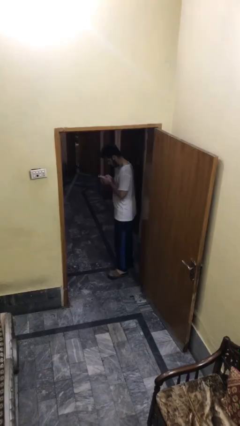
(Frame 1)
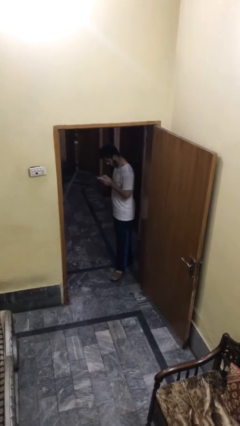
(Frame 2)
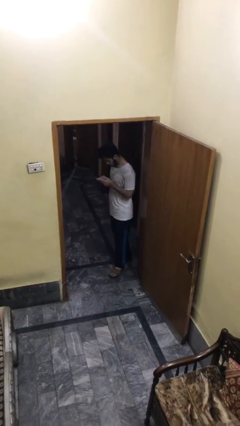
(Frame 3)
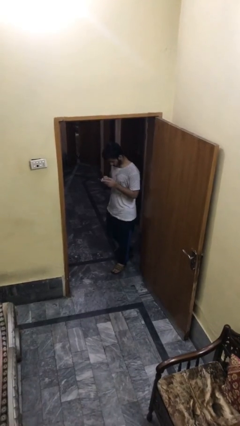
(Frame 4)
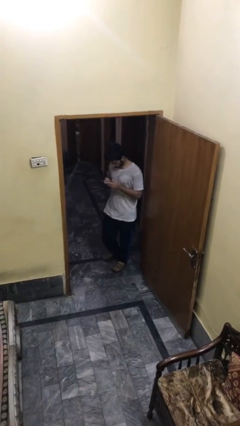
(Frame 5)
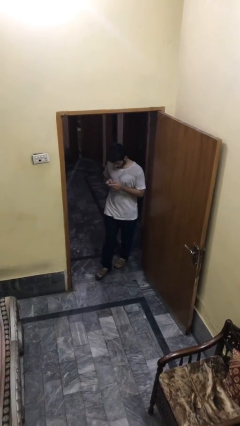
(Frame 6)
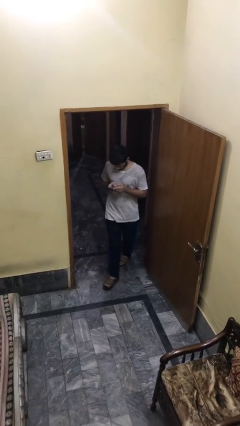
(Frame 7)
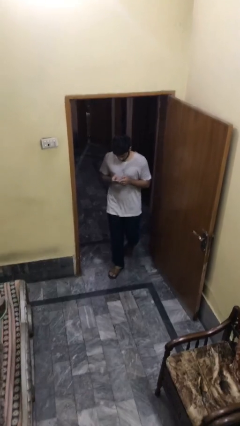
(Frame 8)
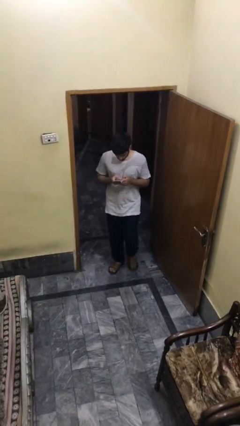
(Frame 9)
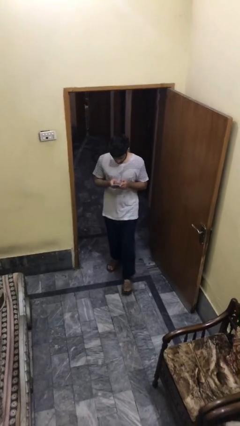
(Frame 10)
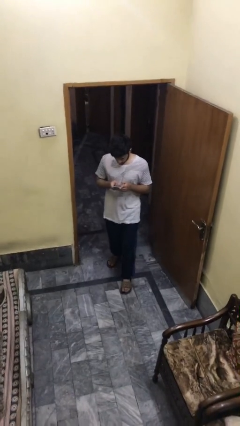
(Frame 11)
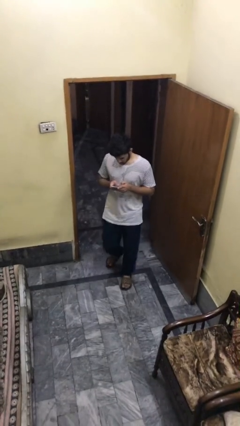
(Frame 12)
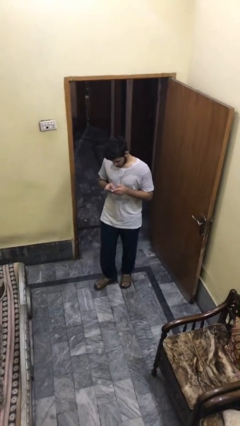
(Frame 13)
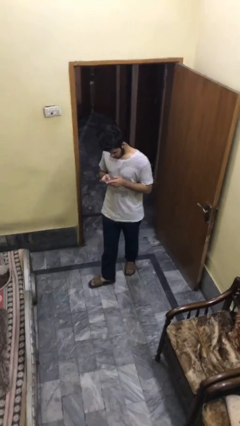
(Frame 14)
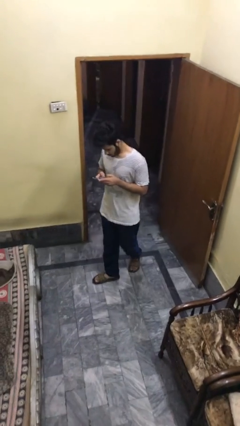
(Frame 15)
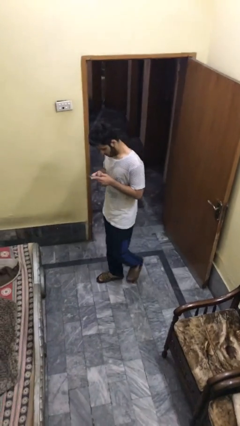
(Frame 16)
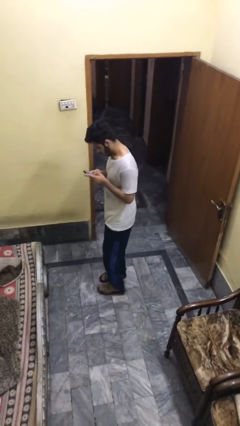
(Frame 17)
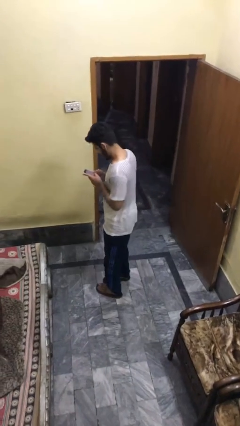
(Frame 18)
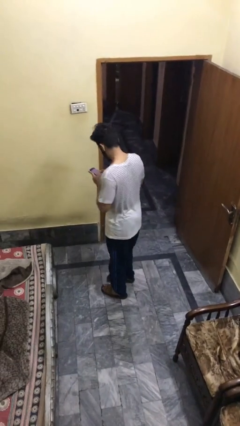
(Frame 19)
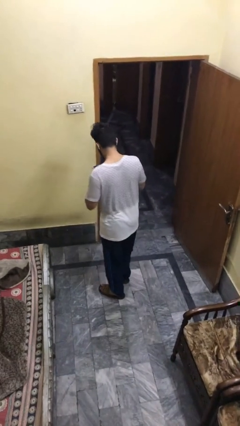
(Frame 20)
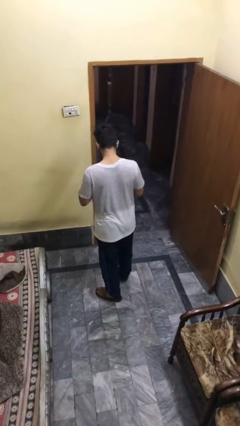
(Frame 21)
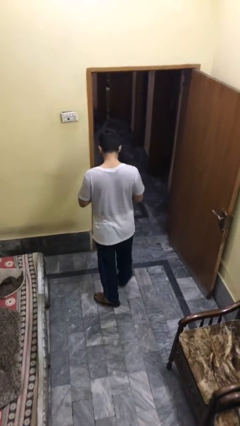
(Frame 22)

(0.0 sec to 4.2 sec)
person enters scene through structure

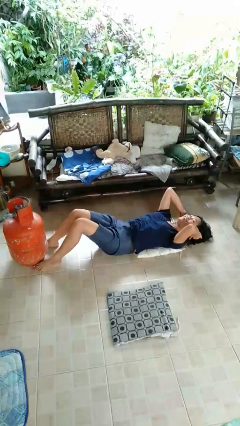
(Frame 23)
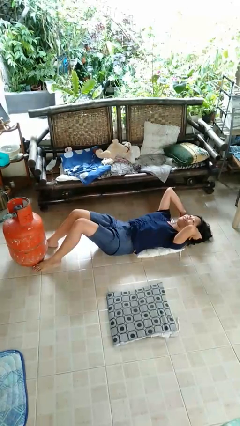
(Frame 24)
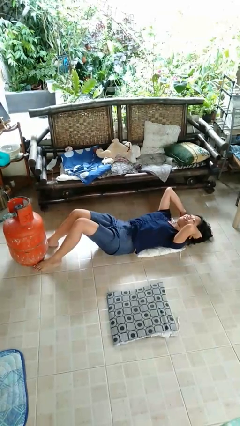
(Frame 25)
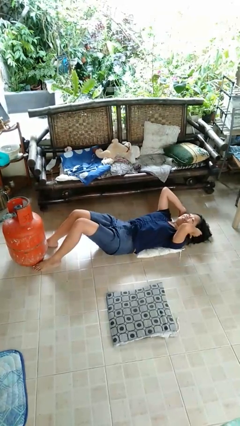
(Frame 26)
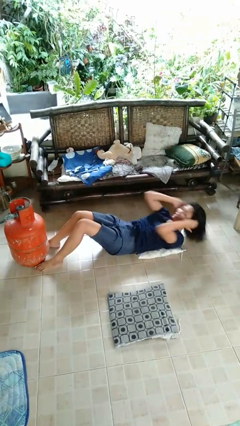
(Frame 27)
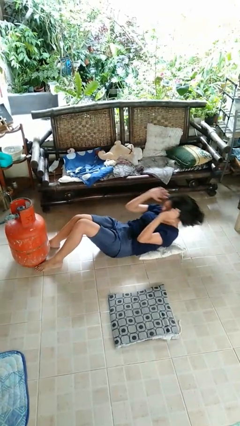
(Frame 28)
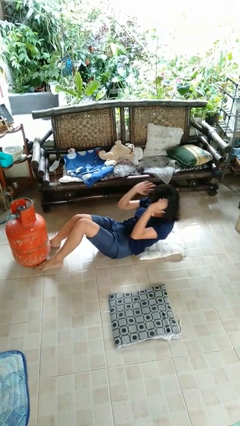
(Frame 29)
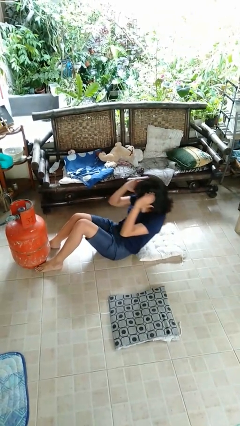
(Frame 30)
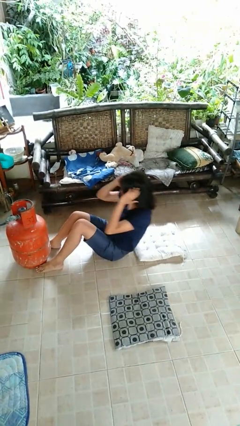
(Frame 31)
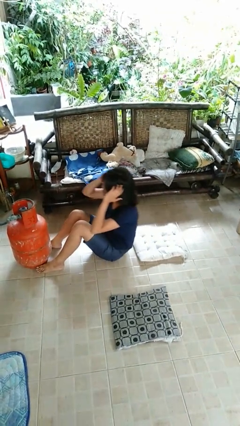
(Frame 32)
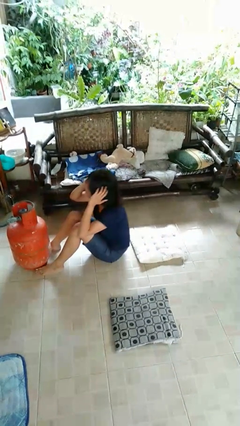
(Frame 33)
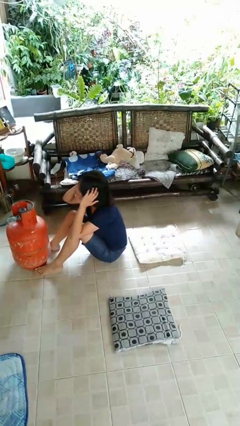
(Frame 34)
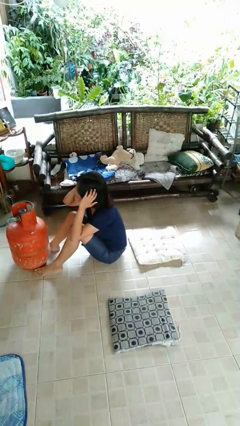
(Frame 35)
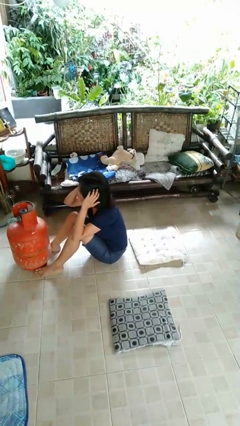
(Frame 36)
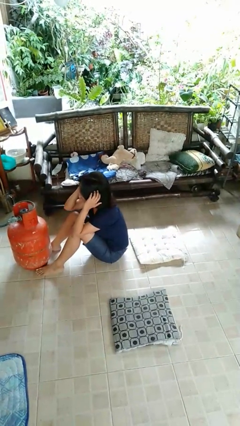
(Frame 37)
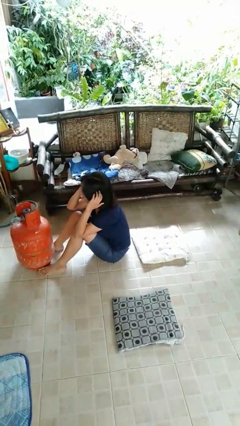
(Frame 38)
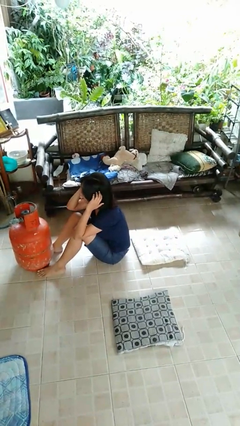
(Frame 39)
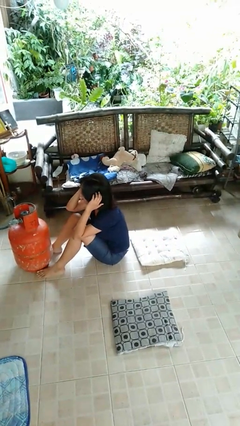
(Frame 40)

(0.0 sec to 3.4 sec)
person exercises with situp

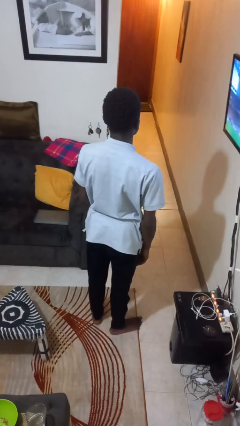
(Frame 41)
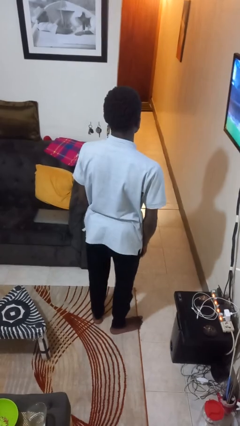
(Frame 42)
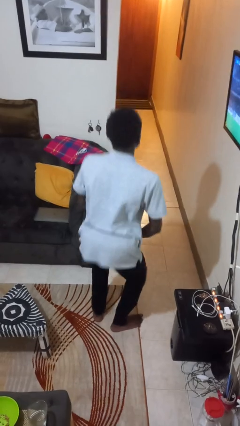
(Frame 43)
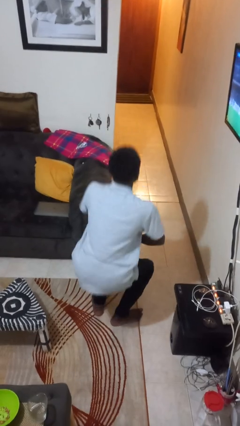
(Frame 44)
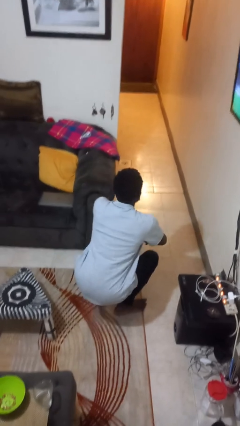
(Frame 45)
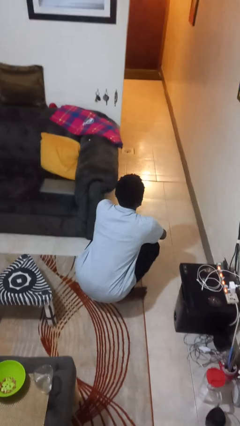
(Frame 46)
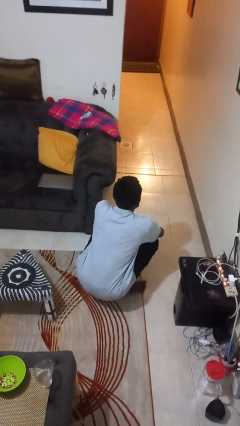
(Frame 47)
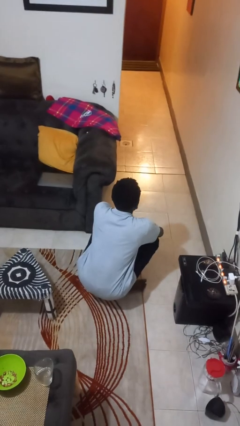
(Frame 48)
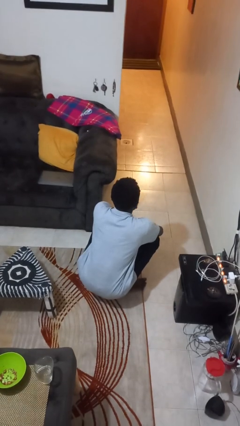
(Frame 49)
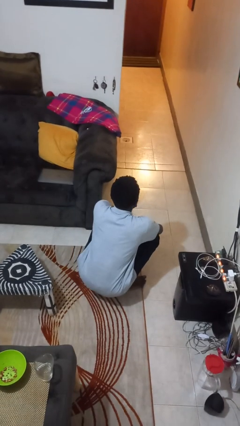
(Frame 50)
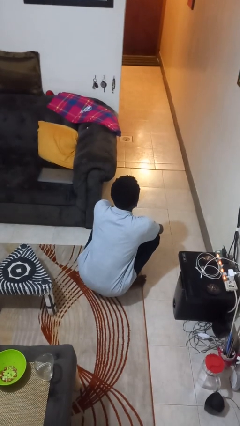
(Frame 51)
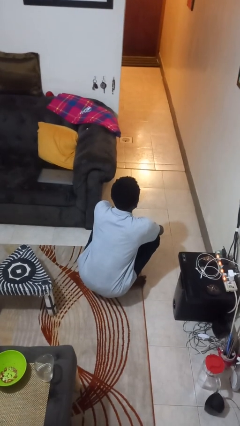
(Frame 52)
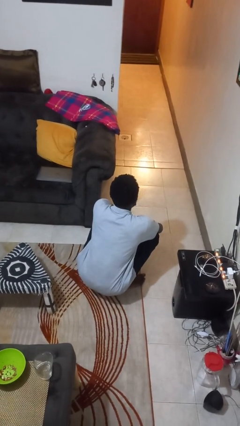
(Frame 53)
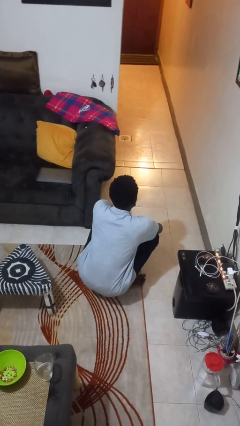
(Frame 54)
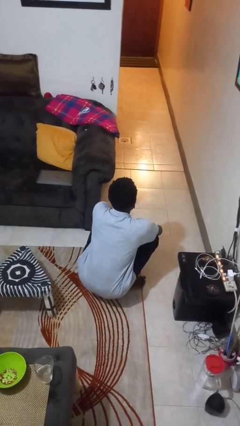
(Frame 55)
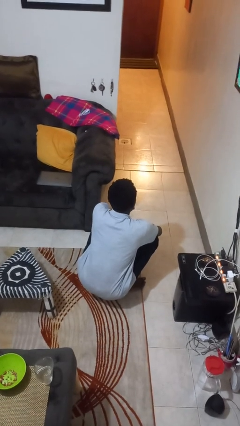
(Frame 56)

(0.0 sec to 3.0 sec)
person squats

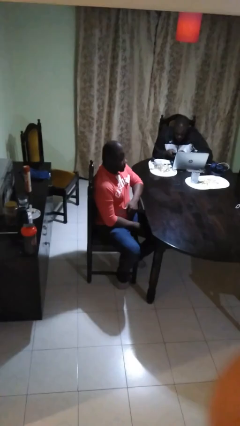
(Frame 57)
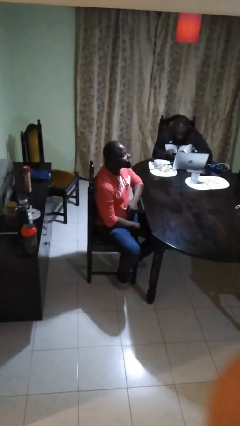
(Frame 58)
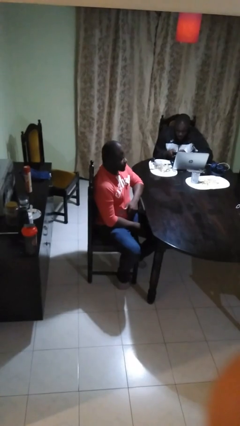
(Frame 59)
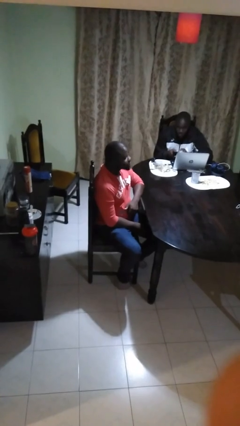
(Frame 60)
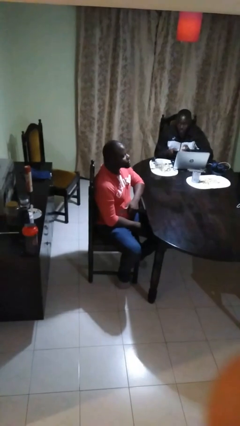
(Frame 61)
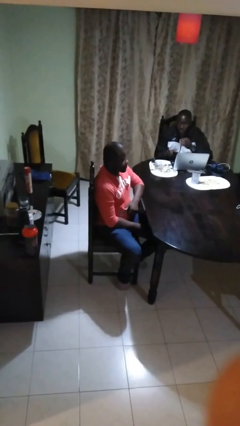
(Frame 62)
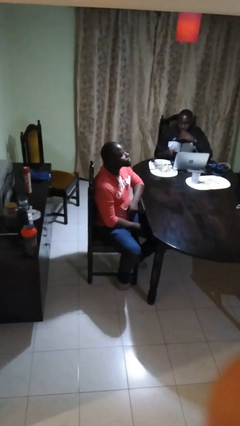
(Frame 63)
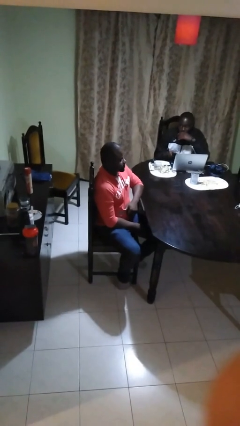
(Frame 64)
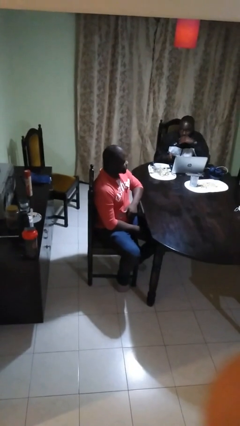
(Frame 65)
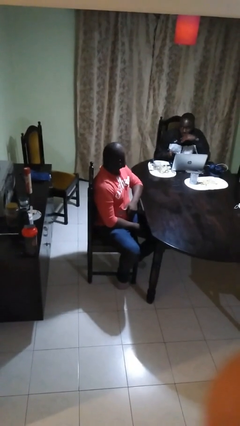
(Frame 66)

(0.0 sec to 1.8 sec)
person nods head

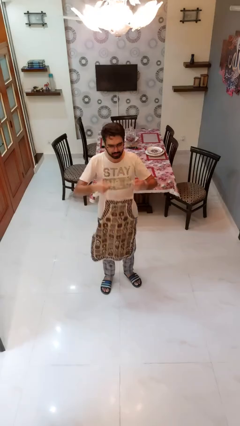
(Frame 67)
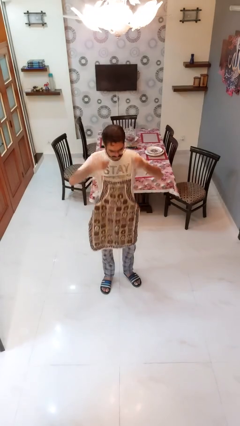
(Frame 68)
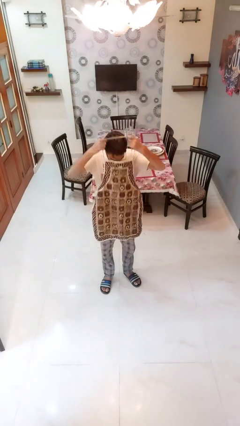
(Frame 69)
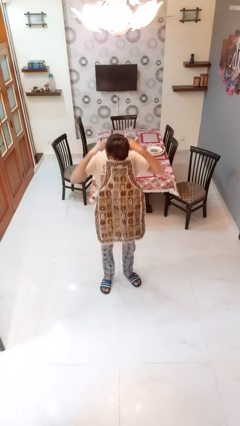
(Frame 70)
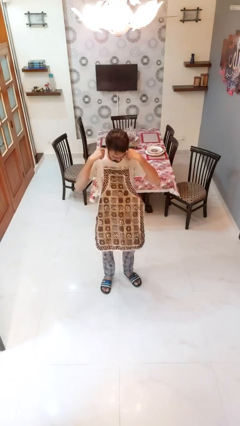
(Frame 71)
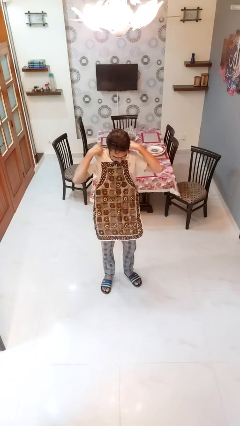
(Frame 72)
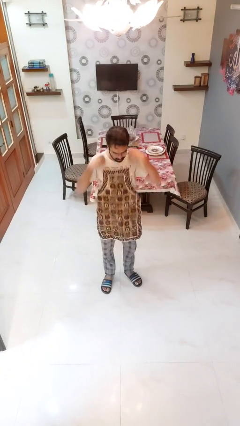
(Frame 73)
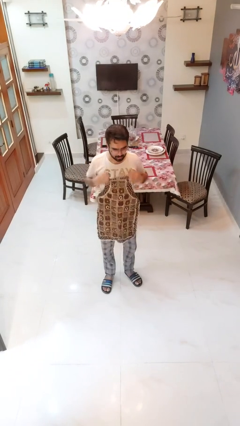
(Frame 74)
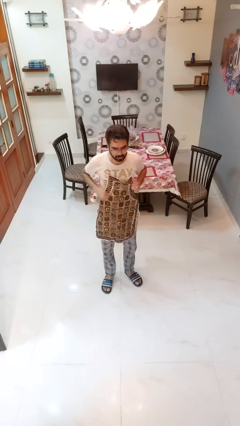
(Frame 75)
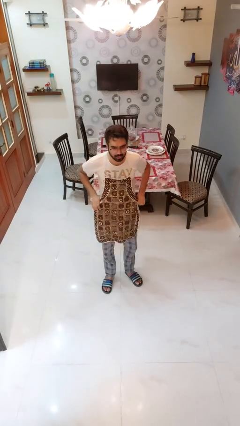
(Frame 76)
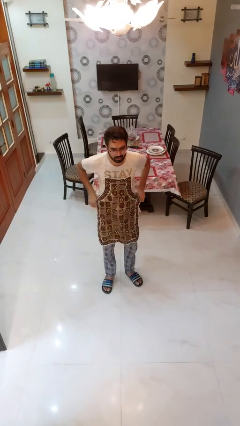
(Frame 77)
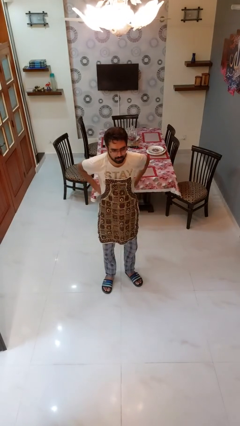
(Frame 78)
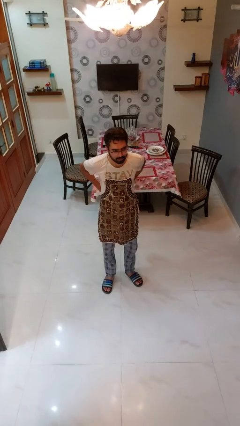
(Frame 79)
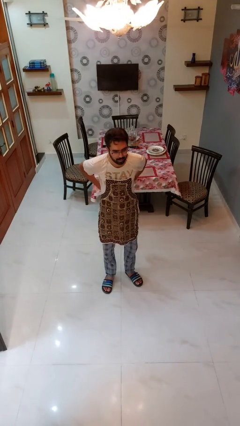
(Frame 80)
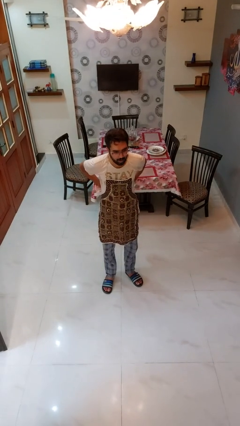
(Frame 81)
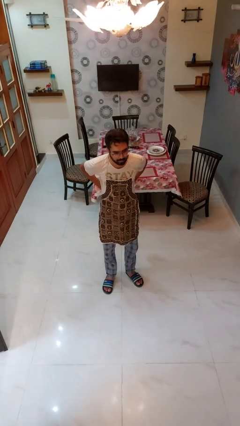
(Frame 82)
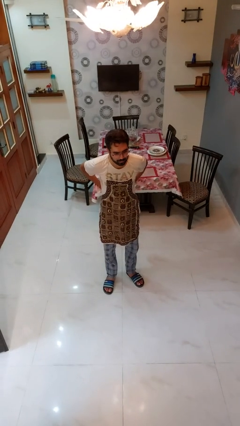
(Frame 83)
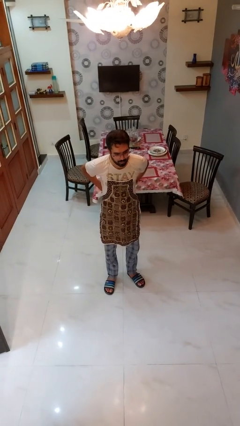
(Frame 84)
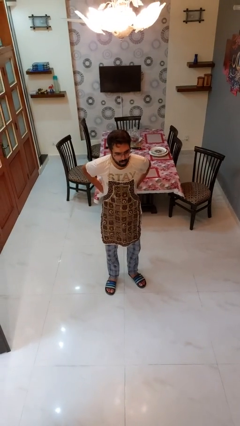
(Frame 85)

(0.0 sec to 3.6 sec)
person puts on apron

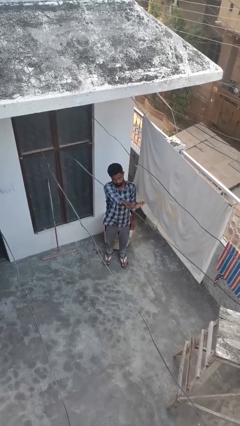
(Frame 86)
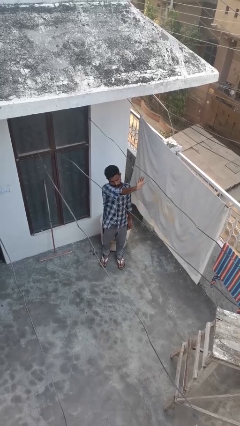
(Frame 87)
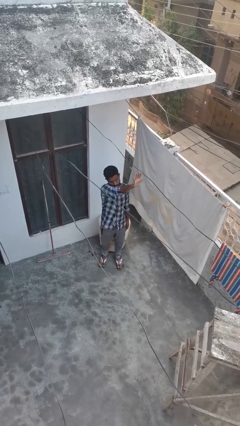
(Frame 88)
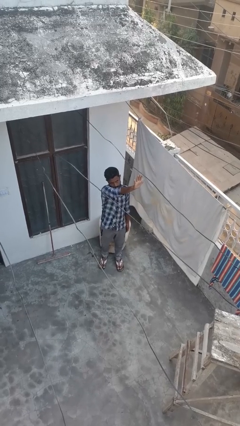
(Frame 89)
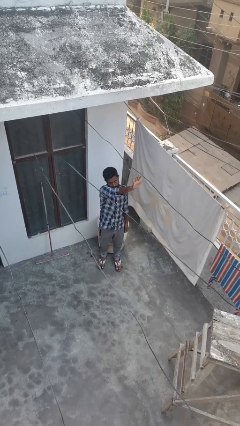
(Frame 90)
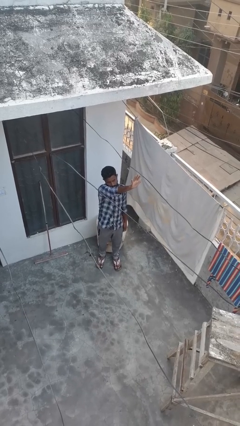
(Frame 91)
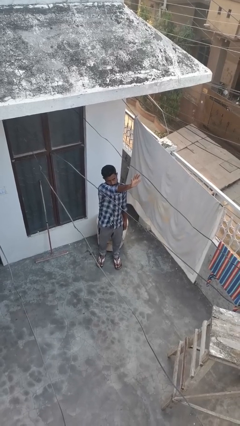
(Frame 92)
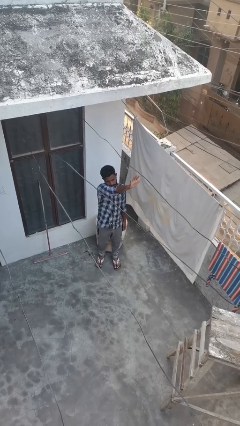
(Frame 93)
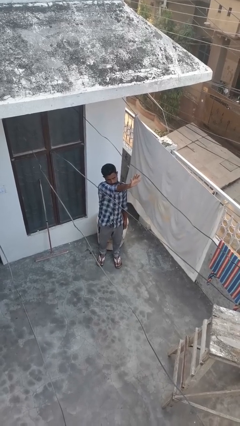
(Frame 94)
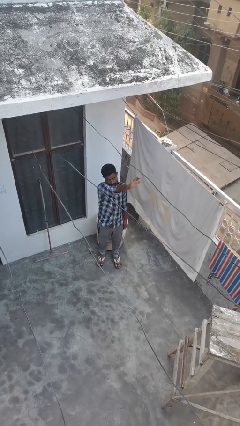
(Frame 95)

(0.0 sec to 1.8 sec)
person gestures number five
